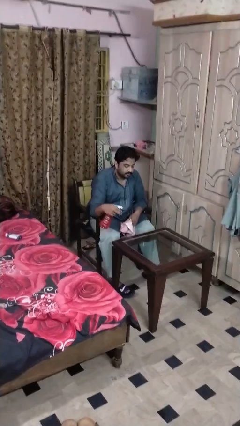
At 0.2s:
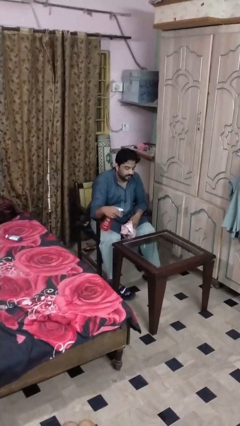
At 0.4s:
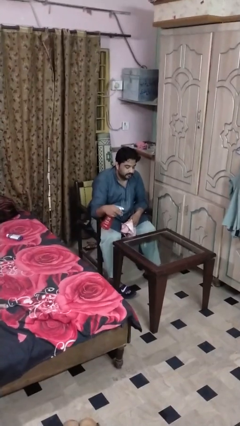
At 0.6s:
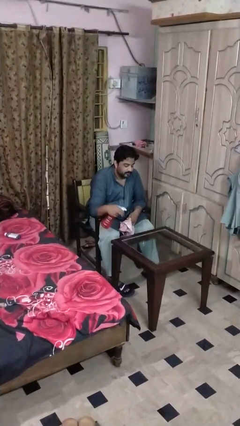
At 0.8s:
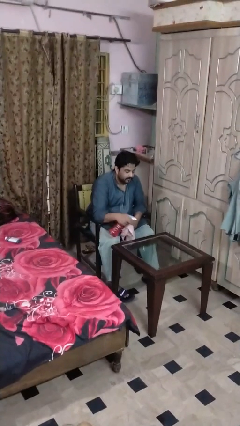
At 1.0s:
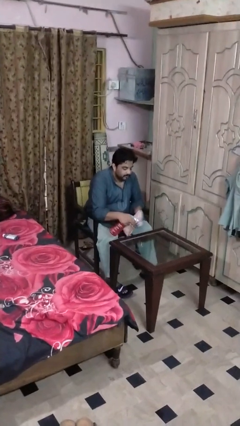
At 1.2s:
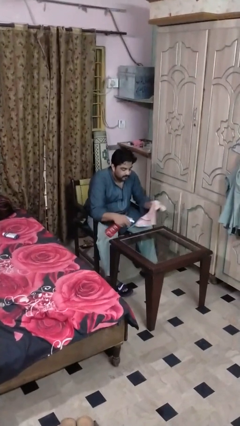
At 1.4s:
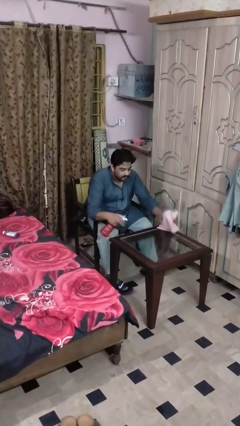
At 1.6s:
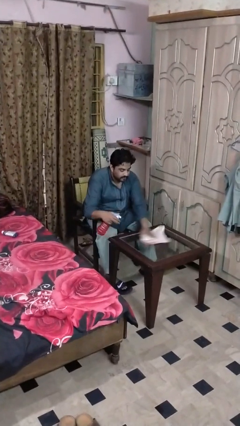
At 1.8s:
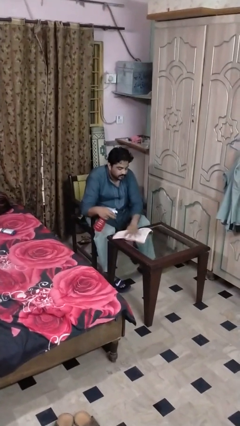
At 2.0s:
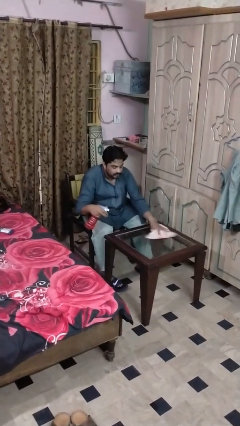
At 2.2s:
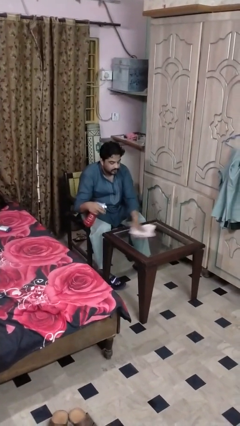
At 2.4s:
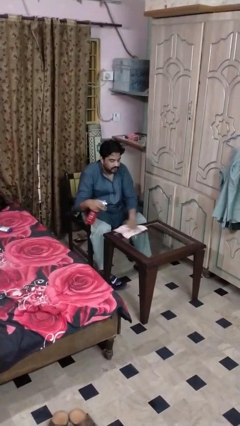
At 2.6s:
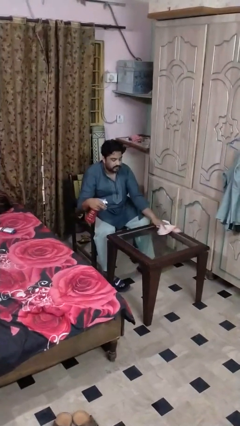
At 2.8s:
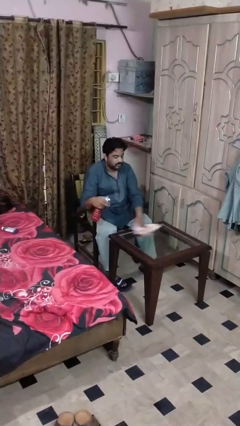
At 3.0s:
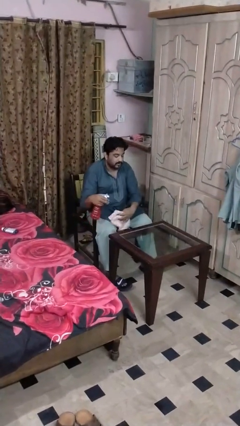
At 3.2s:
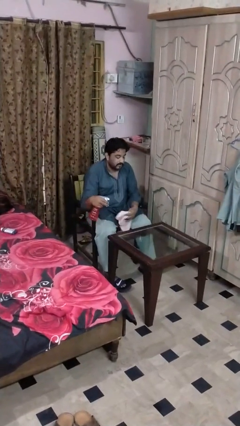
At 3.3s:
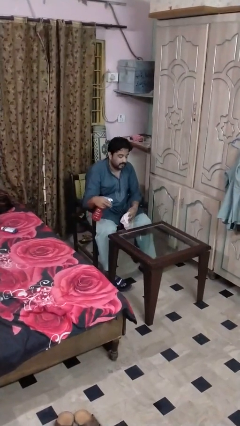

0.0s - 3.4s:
person sprays from bottle

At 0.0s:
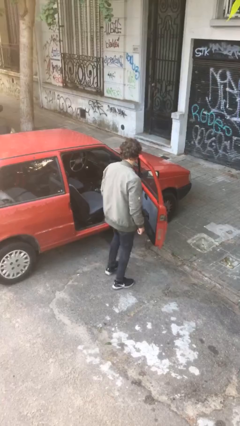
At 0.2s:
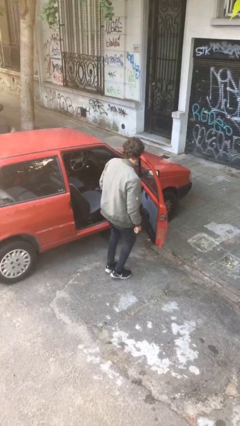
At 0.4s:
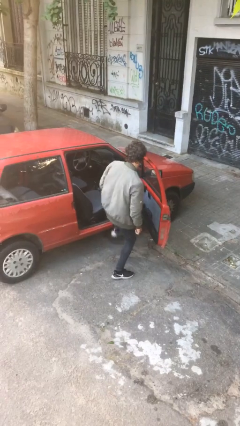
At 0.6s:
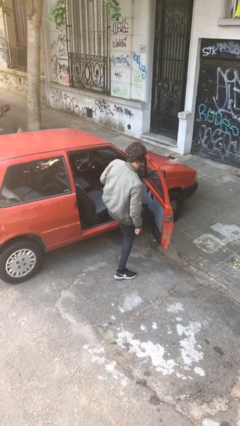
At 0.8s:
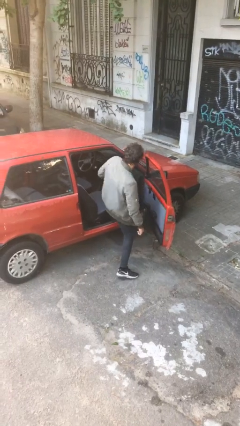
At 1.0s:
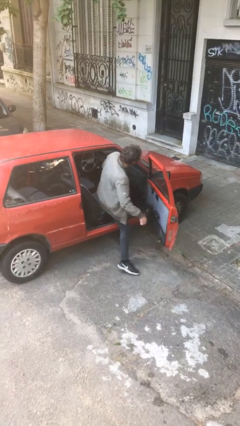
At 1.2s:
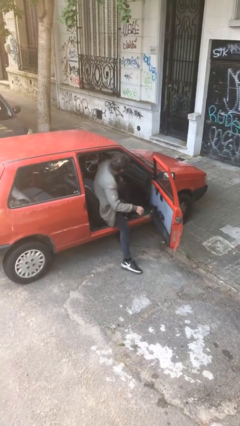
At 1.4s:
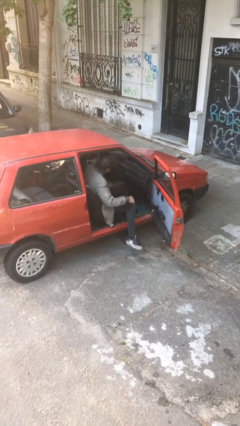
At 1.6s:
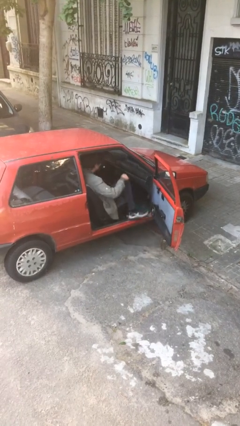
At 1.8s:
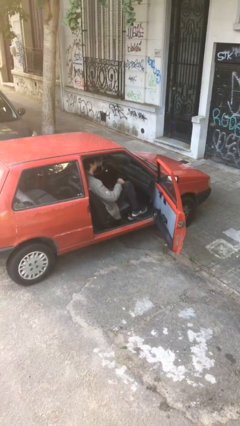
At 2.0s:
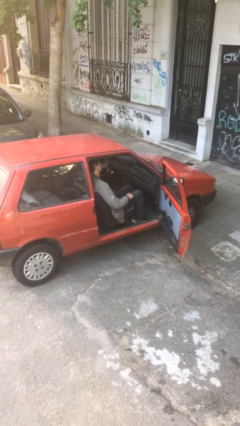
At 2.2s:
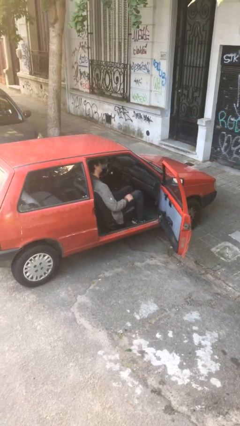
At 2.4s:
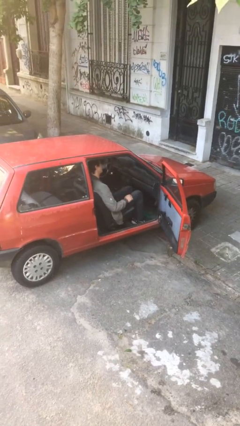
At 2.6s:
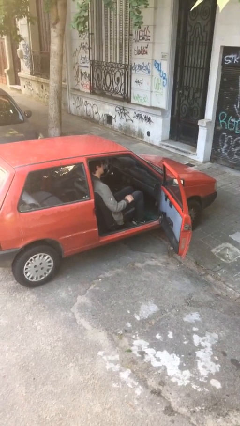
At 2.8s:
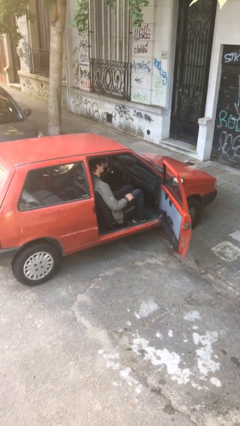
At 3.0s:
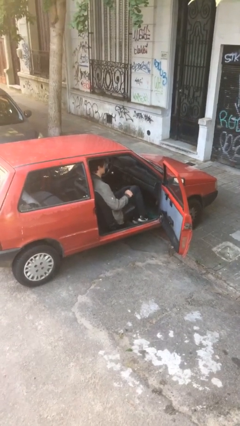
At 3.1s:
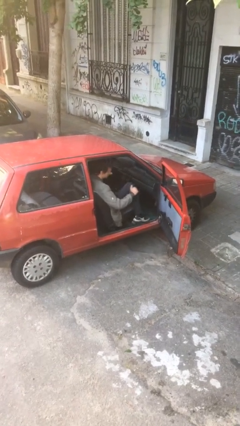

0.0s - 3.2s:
person enters car

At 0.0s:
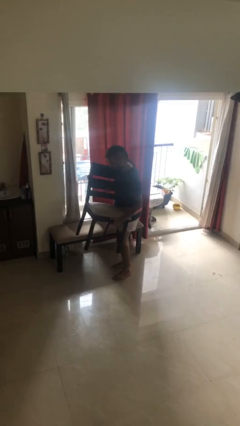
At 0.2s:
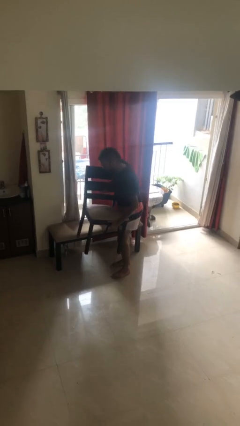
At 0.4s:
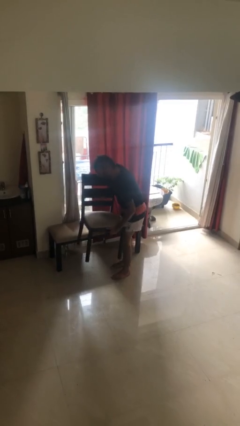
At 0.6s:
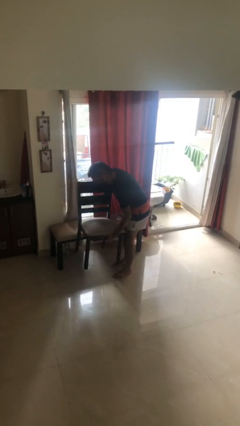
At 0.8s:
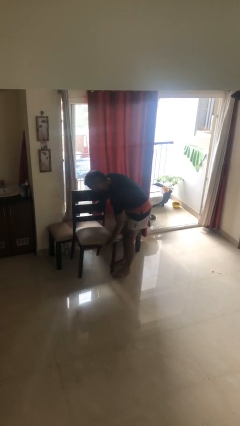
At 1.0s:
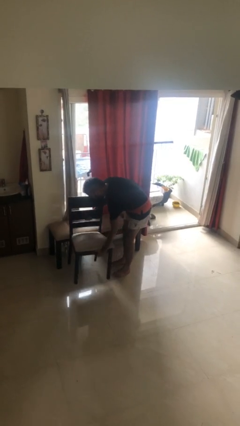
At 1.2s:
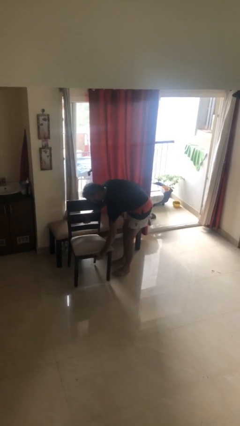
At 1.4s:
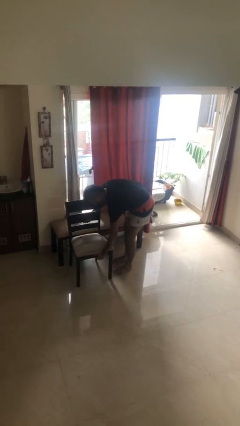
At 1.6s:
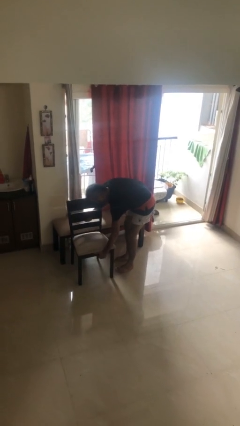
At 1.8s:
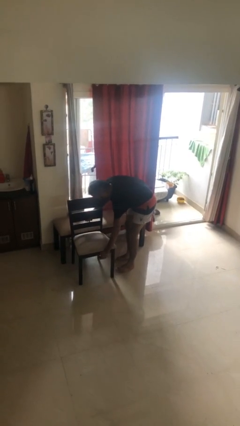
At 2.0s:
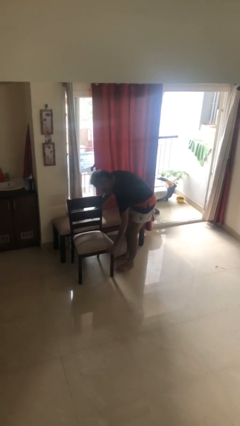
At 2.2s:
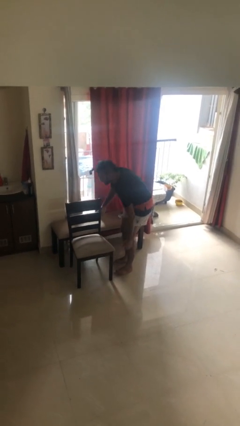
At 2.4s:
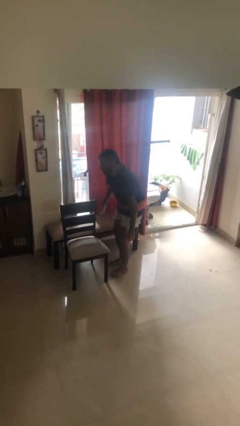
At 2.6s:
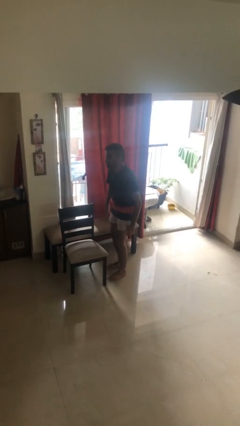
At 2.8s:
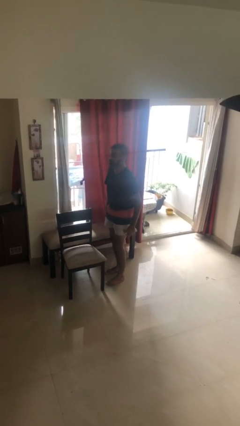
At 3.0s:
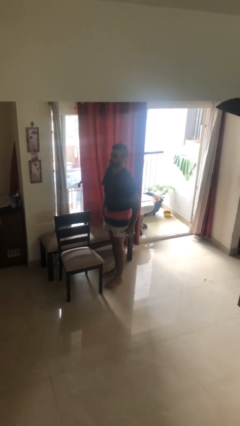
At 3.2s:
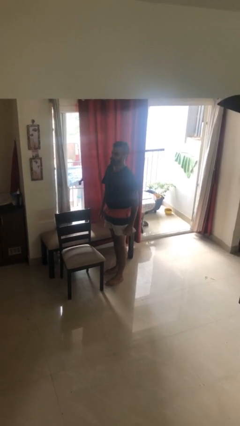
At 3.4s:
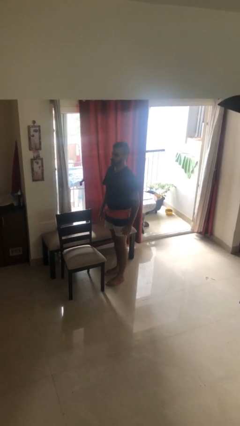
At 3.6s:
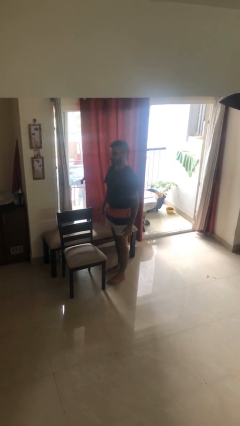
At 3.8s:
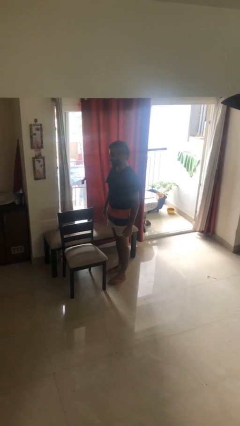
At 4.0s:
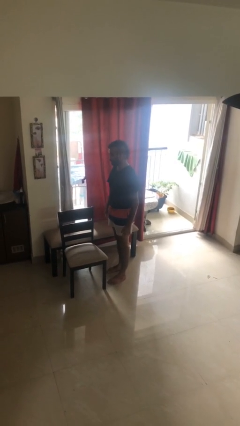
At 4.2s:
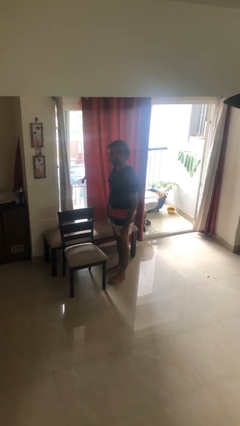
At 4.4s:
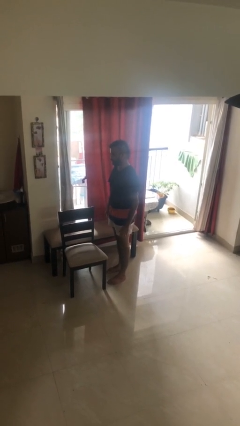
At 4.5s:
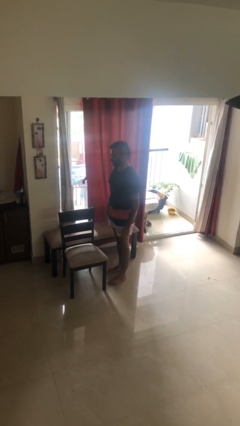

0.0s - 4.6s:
person puts down object on floor

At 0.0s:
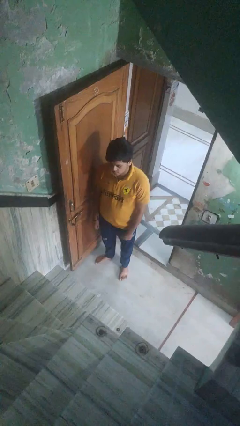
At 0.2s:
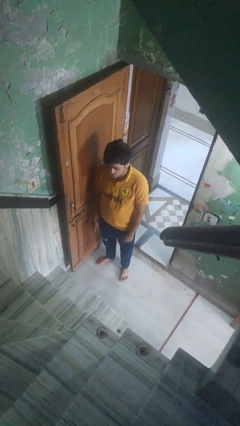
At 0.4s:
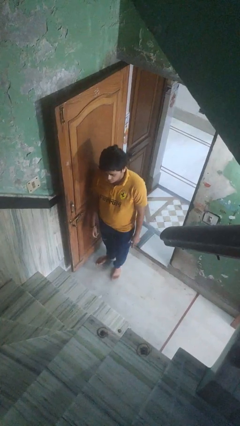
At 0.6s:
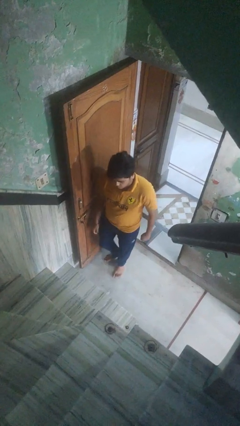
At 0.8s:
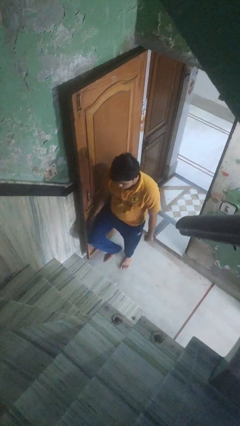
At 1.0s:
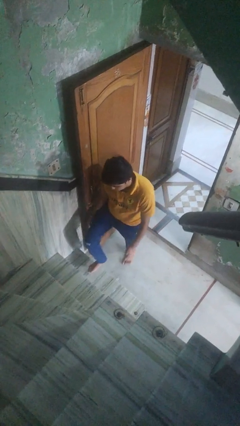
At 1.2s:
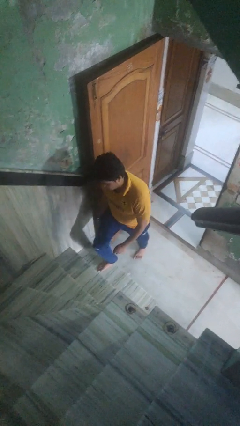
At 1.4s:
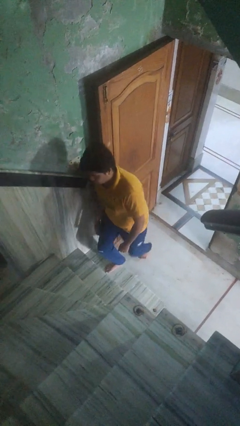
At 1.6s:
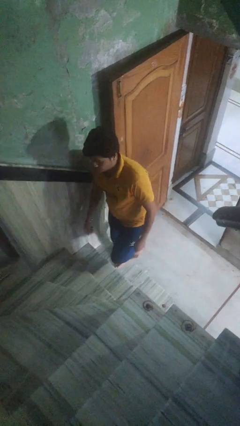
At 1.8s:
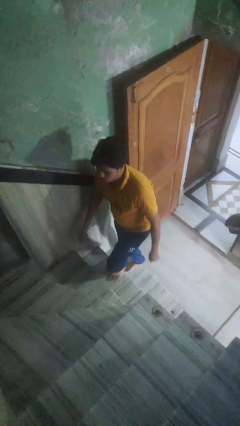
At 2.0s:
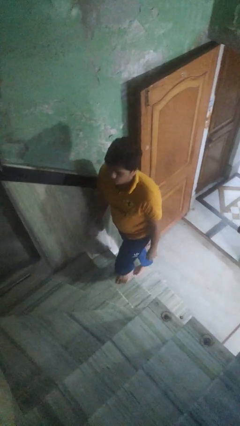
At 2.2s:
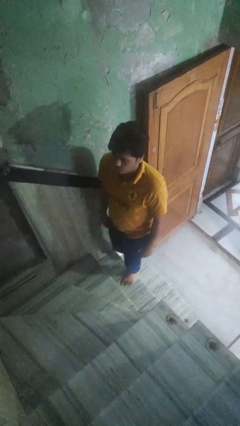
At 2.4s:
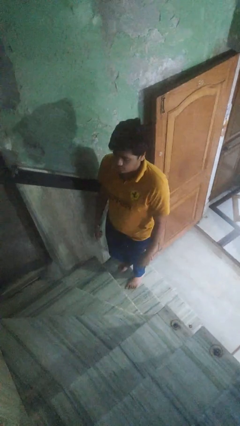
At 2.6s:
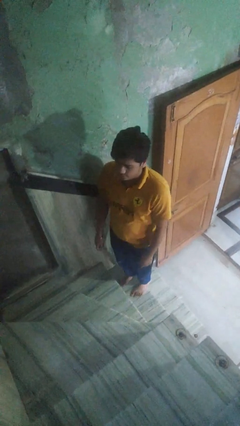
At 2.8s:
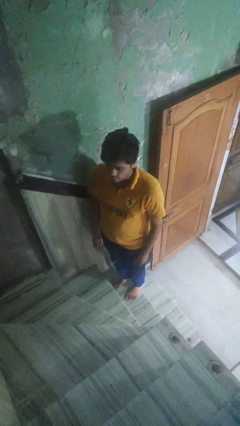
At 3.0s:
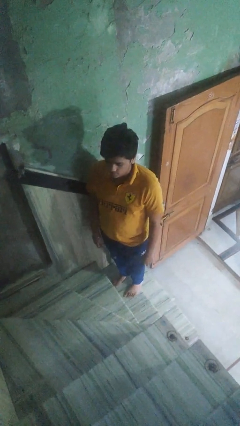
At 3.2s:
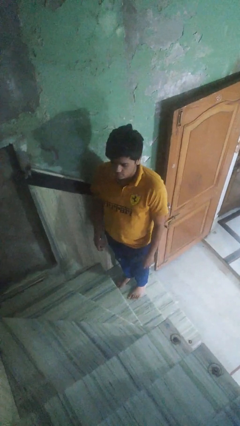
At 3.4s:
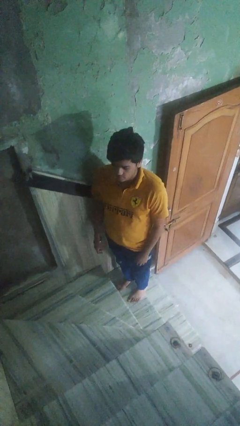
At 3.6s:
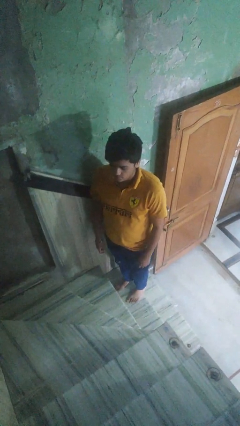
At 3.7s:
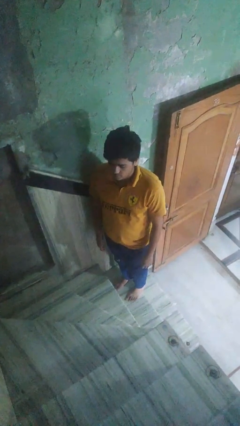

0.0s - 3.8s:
person climbs up stairs

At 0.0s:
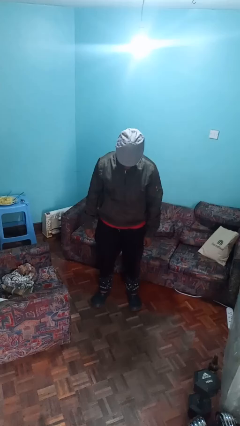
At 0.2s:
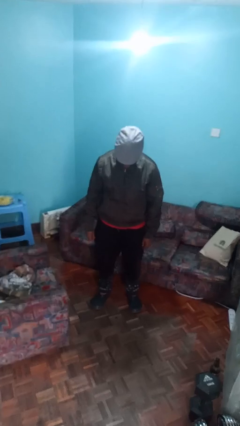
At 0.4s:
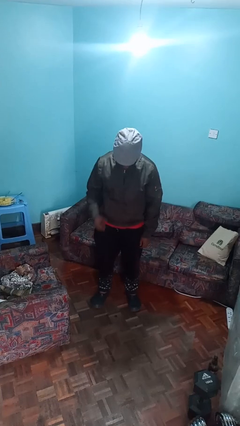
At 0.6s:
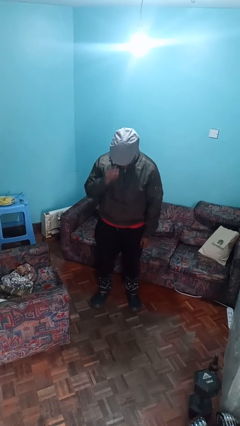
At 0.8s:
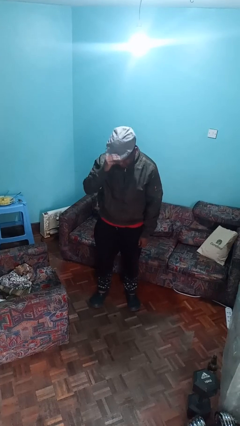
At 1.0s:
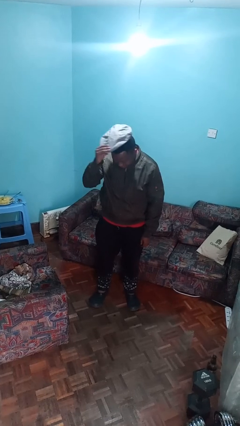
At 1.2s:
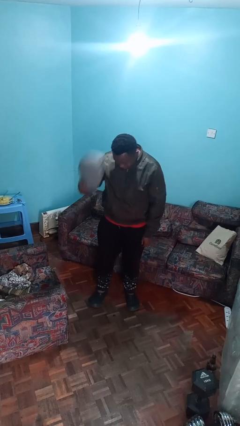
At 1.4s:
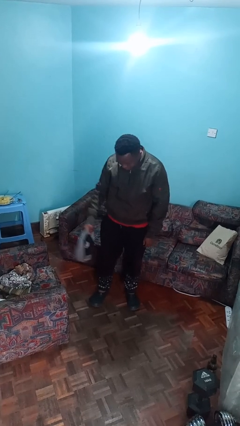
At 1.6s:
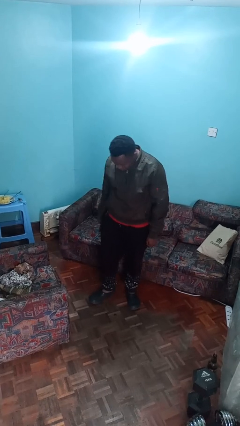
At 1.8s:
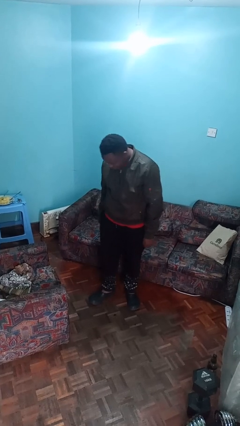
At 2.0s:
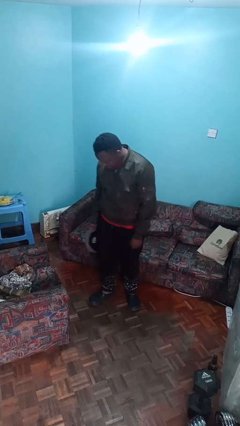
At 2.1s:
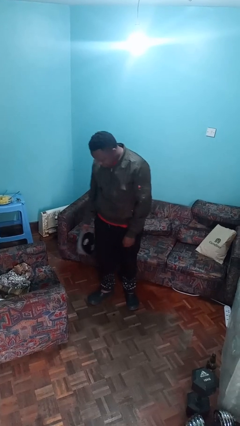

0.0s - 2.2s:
person takes off hat

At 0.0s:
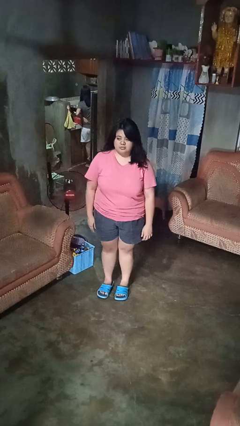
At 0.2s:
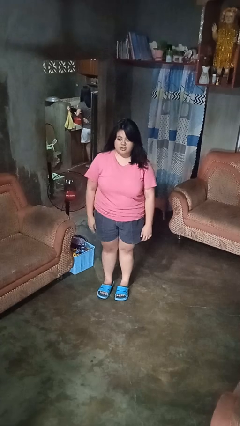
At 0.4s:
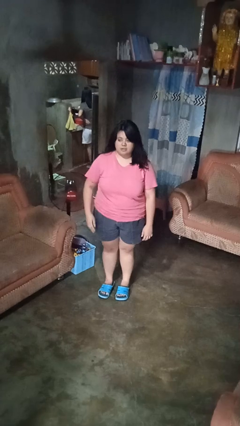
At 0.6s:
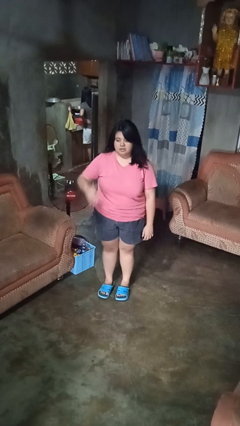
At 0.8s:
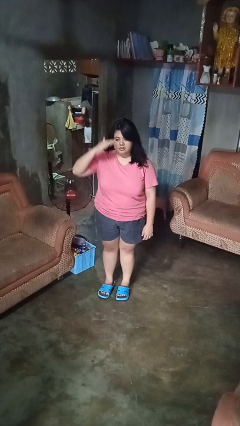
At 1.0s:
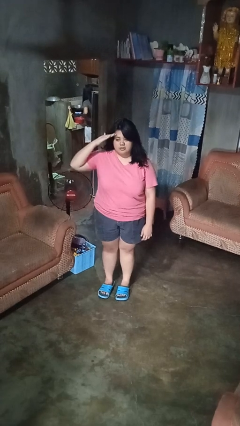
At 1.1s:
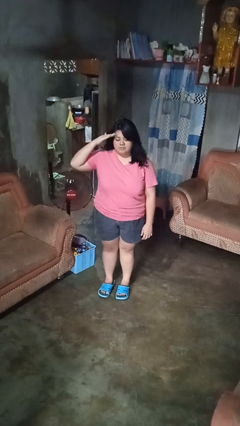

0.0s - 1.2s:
person salutes
